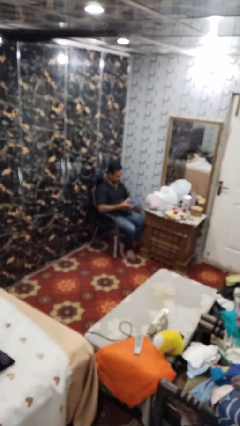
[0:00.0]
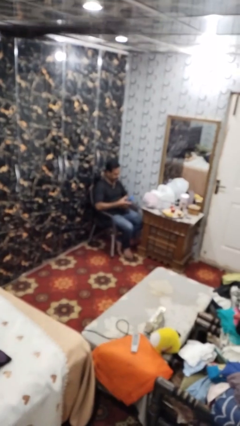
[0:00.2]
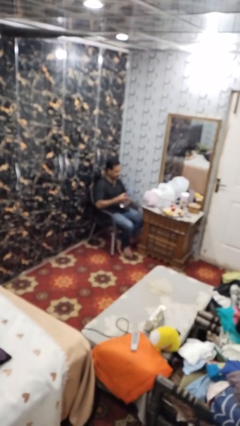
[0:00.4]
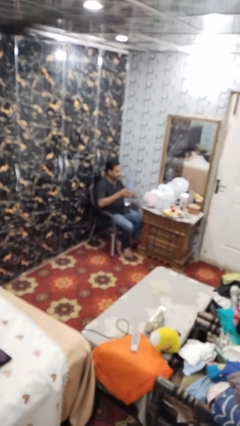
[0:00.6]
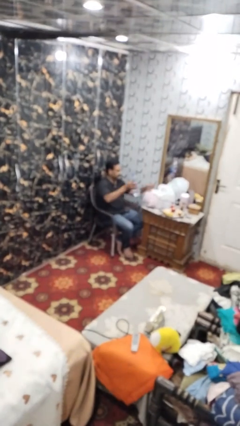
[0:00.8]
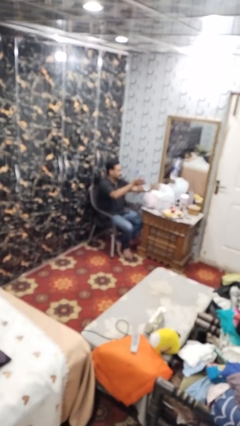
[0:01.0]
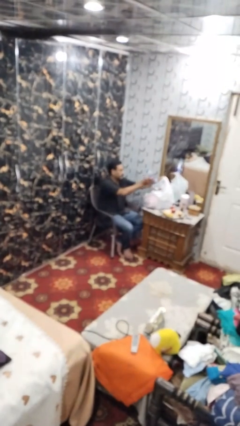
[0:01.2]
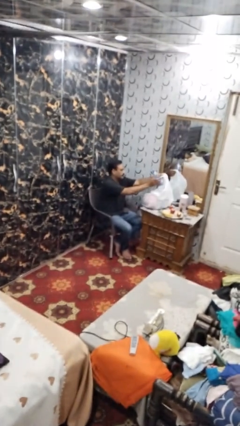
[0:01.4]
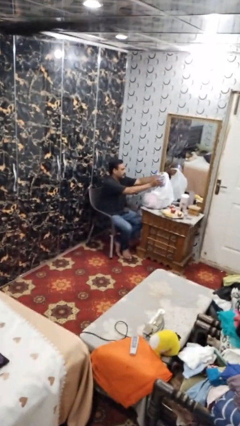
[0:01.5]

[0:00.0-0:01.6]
person puts object into bag

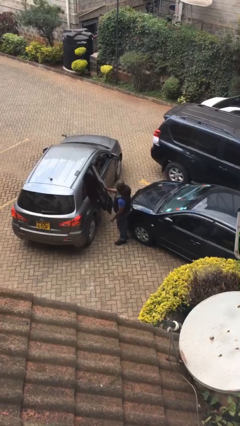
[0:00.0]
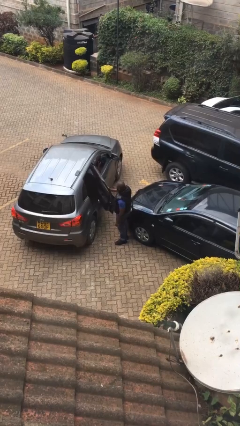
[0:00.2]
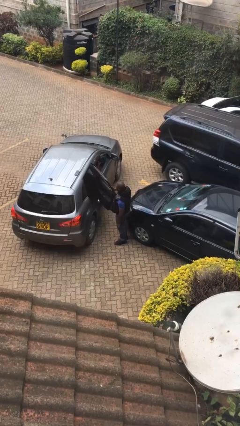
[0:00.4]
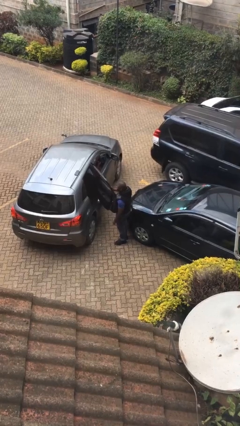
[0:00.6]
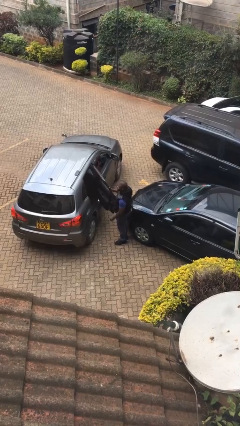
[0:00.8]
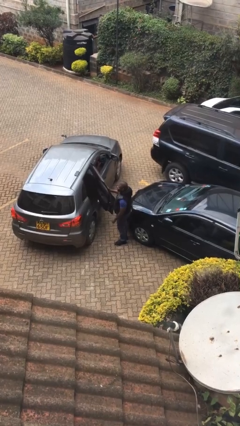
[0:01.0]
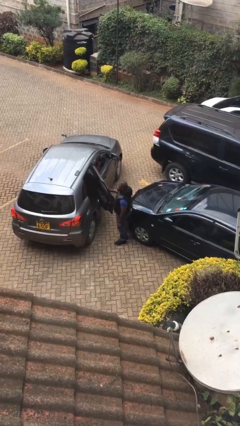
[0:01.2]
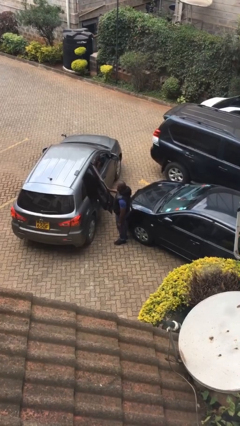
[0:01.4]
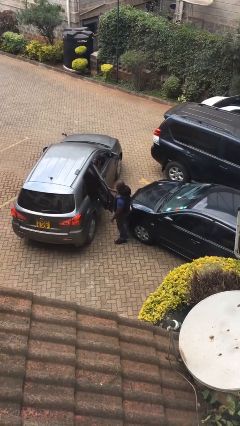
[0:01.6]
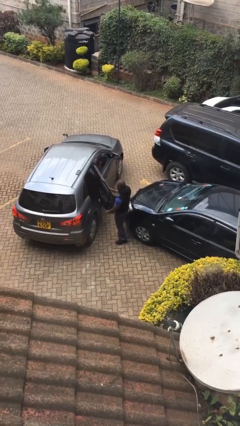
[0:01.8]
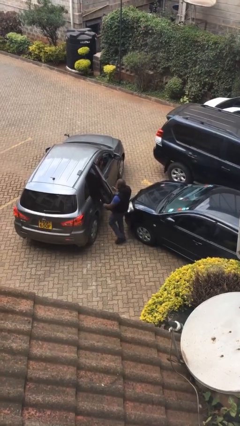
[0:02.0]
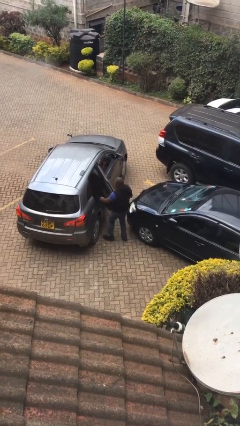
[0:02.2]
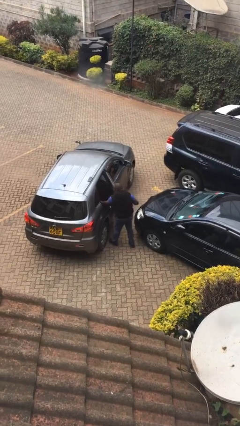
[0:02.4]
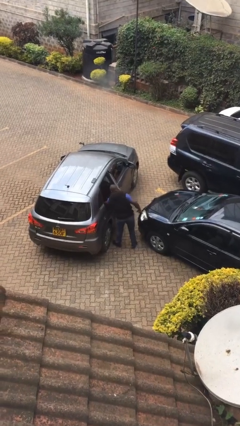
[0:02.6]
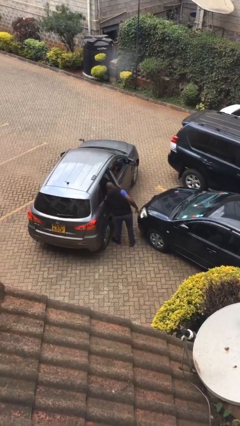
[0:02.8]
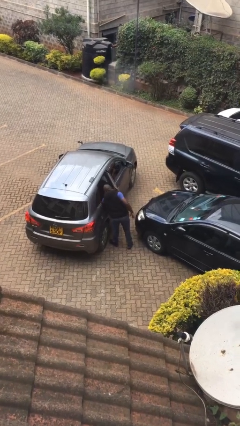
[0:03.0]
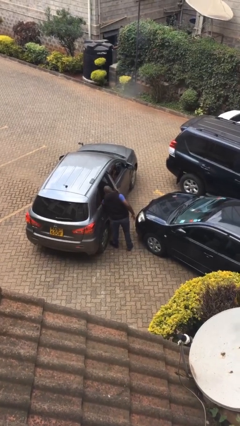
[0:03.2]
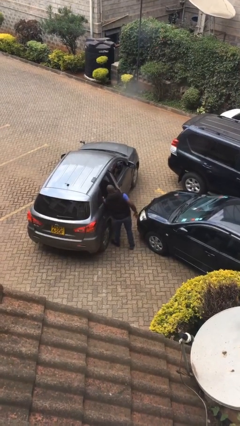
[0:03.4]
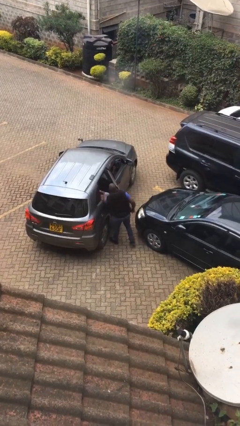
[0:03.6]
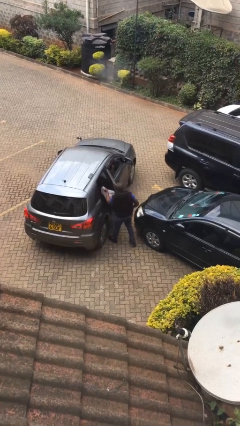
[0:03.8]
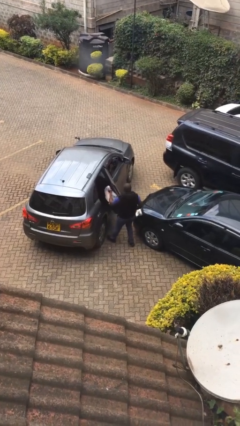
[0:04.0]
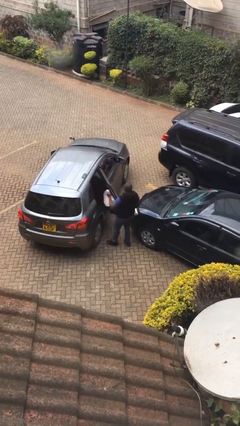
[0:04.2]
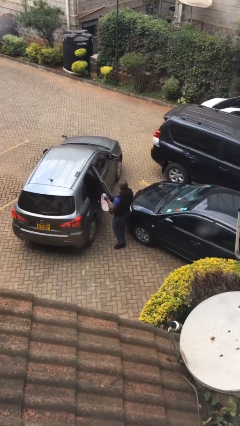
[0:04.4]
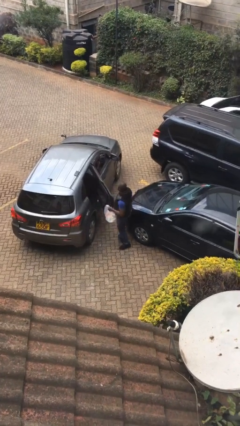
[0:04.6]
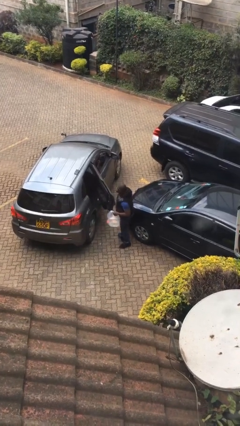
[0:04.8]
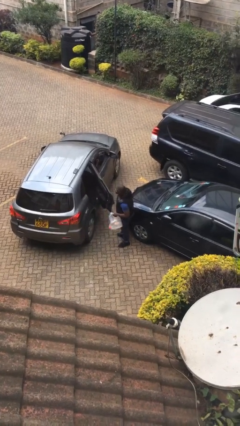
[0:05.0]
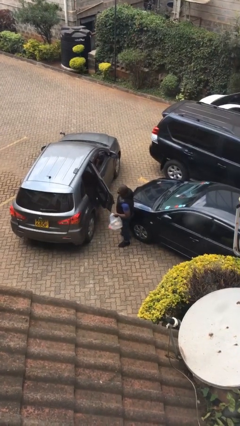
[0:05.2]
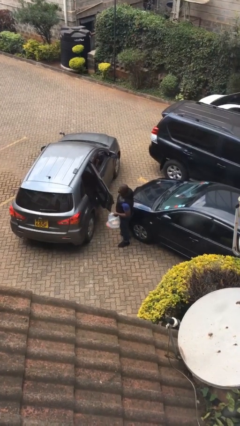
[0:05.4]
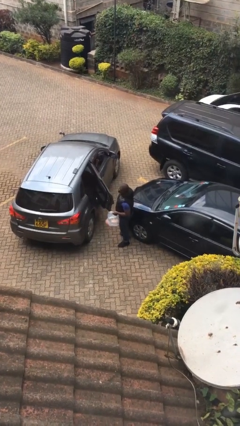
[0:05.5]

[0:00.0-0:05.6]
person unloads car

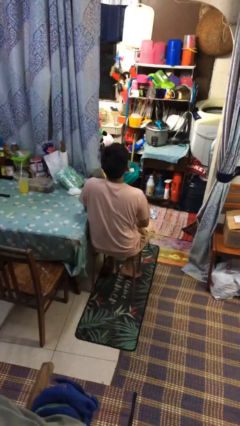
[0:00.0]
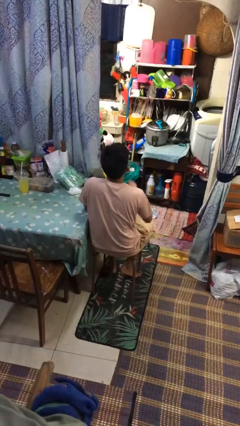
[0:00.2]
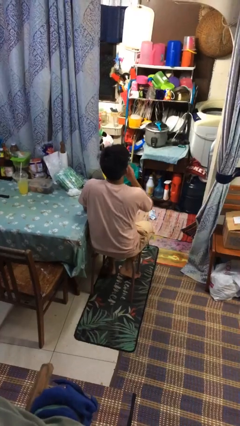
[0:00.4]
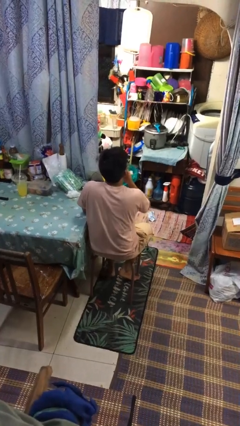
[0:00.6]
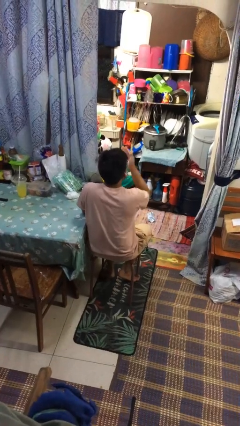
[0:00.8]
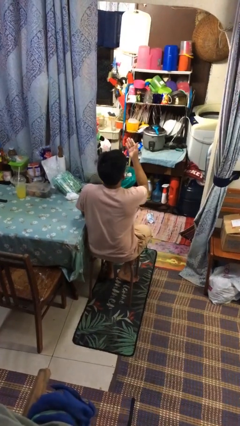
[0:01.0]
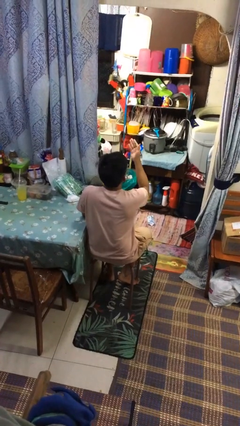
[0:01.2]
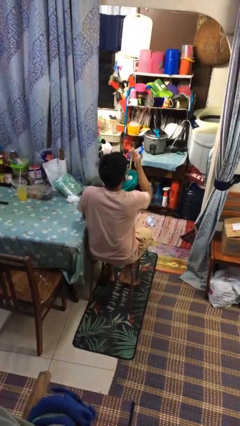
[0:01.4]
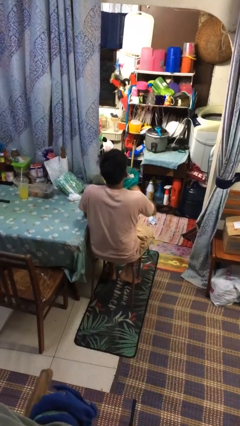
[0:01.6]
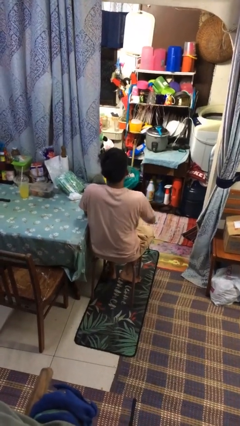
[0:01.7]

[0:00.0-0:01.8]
person gestures blow kiss

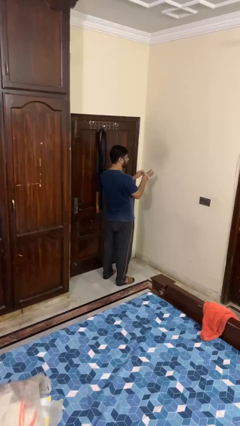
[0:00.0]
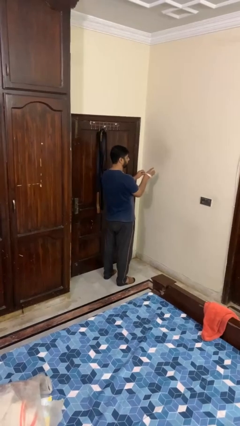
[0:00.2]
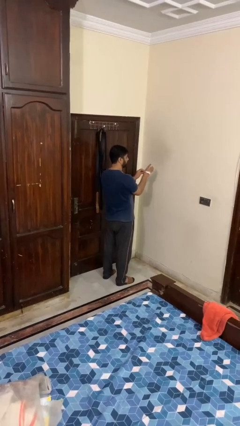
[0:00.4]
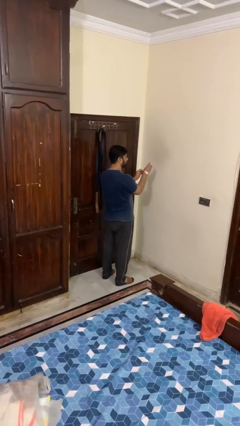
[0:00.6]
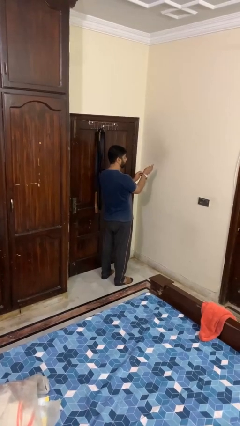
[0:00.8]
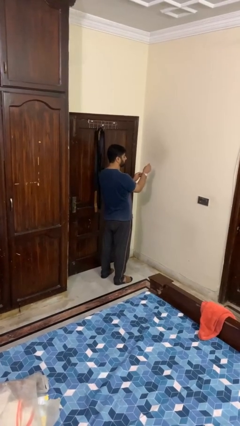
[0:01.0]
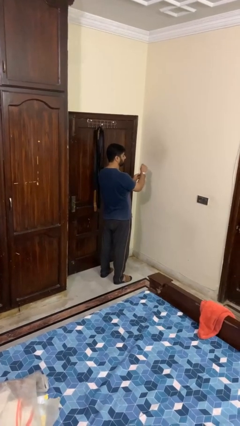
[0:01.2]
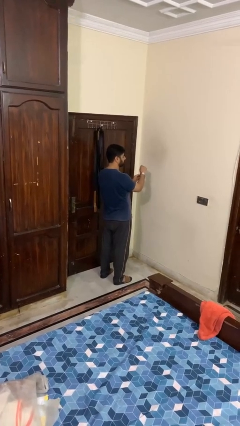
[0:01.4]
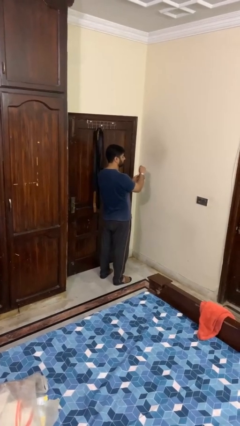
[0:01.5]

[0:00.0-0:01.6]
person puts on wristwatch

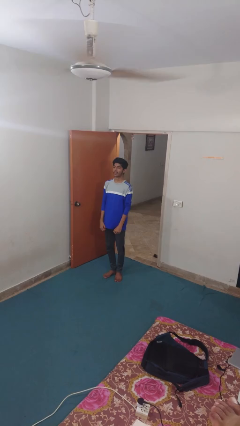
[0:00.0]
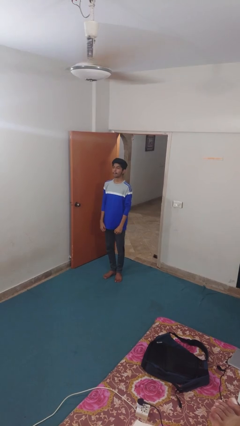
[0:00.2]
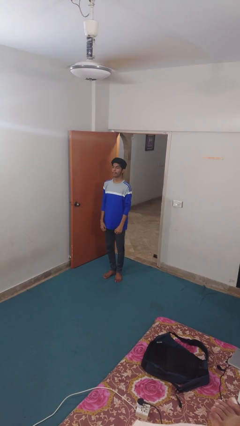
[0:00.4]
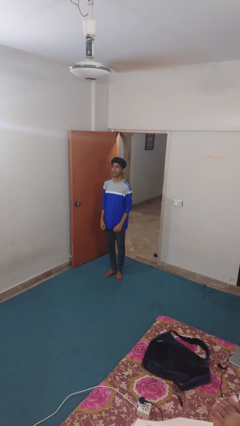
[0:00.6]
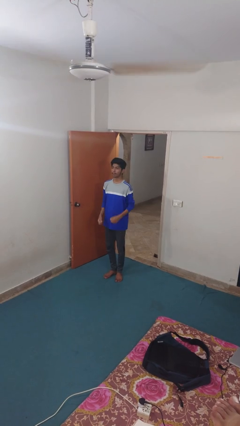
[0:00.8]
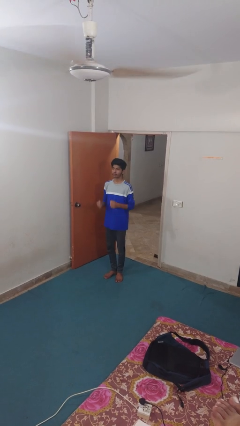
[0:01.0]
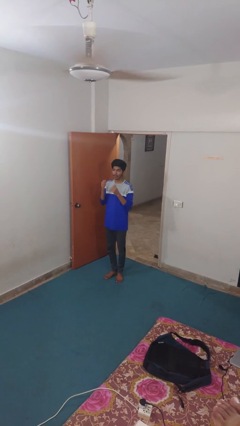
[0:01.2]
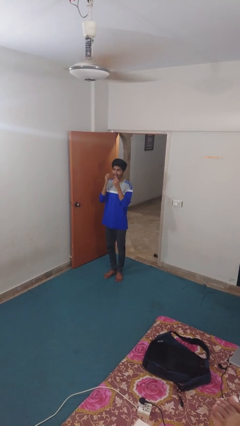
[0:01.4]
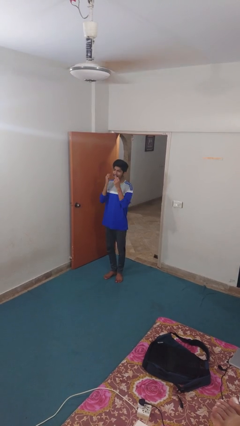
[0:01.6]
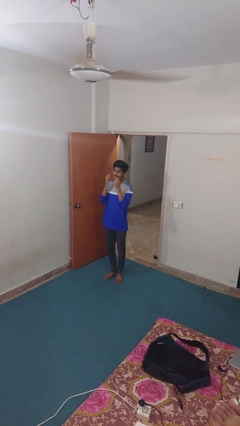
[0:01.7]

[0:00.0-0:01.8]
person flosses

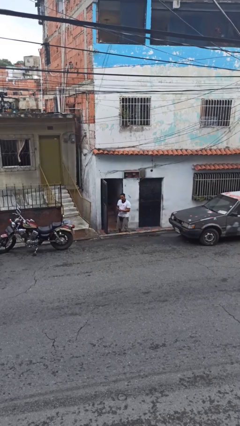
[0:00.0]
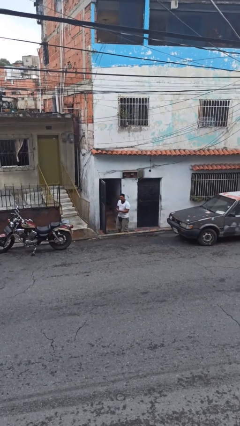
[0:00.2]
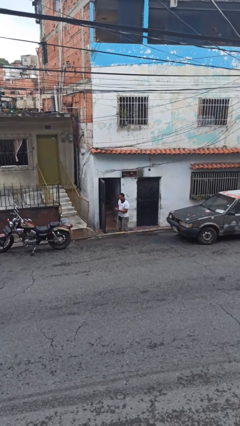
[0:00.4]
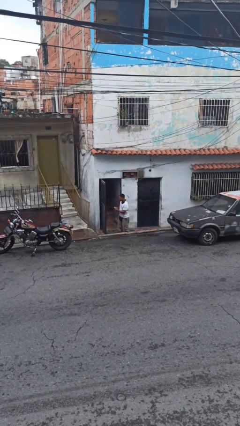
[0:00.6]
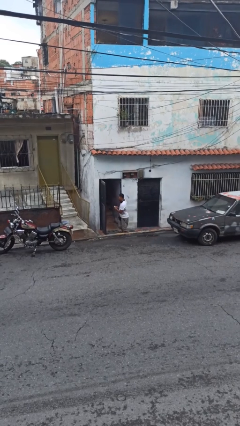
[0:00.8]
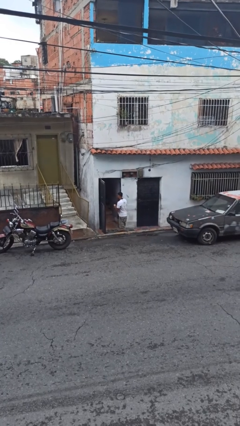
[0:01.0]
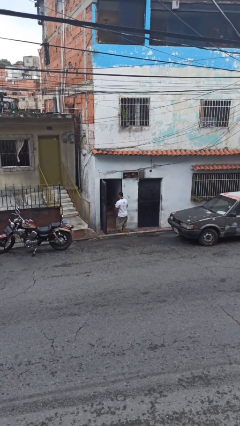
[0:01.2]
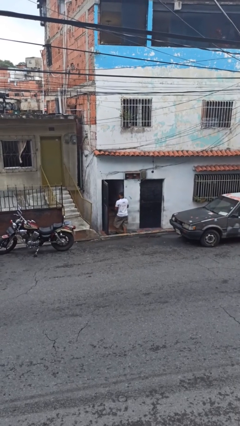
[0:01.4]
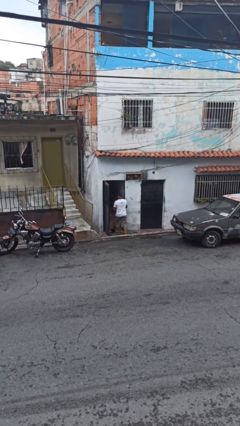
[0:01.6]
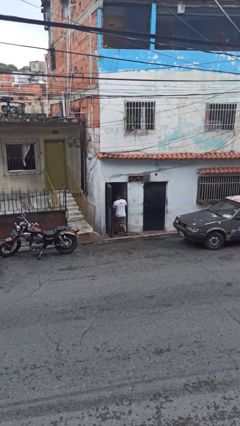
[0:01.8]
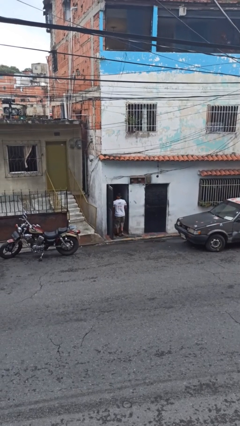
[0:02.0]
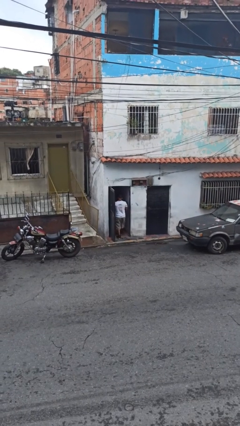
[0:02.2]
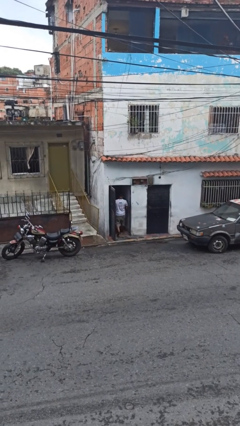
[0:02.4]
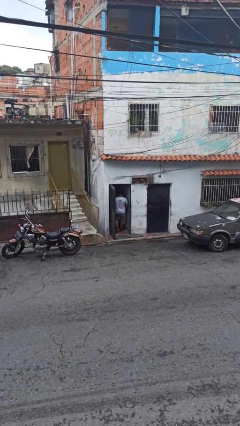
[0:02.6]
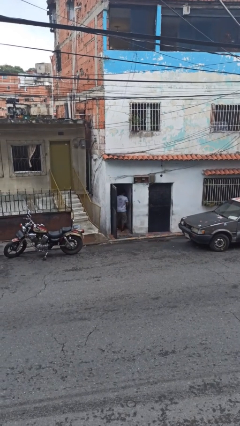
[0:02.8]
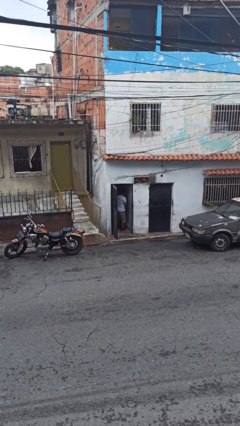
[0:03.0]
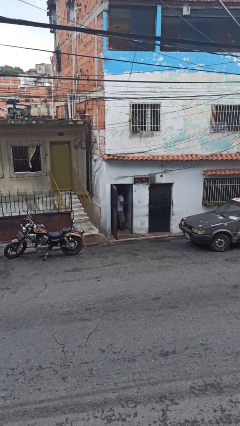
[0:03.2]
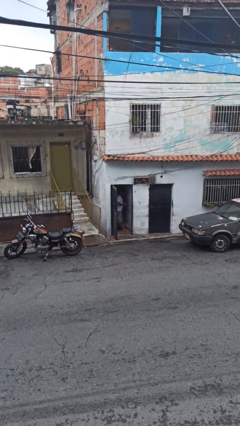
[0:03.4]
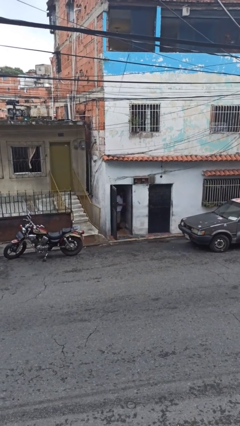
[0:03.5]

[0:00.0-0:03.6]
person exits scene through structure

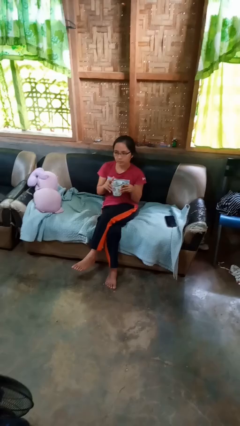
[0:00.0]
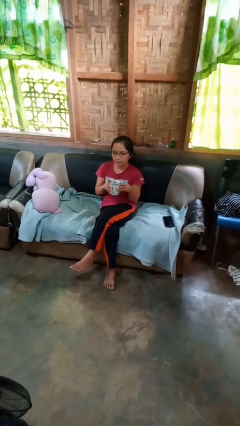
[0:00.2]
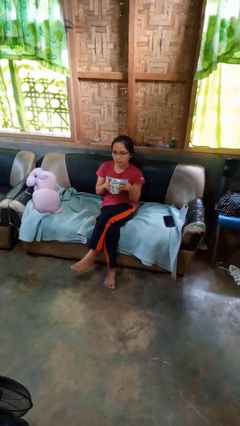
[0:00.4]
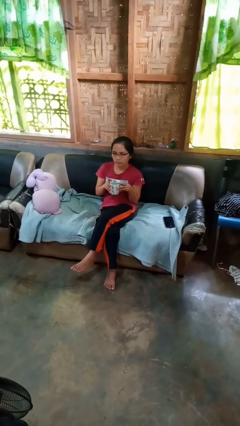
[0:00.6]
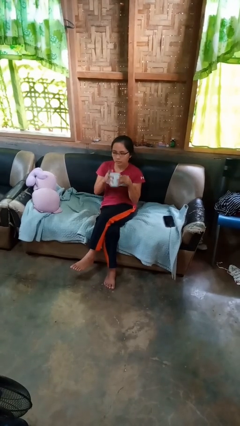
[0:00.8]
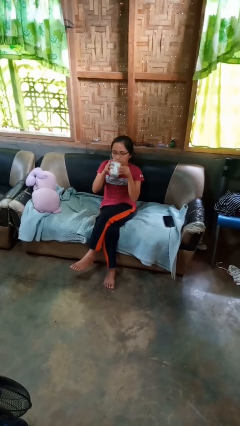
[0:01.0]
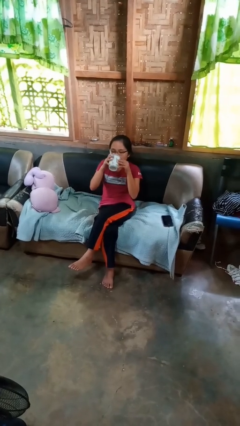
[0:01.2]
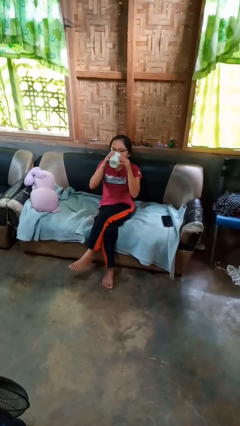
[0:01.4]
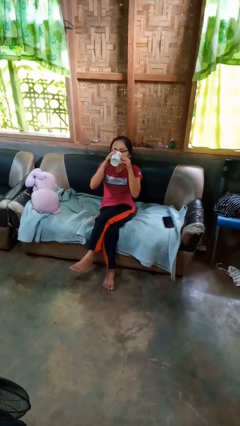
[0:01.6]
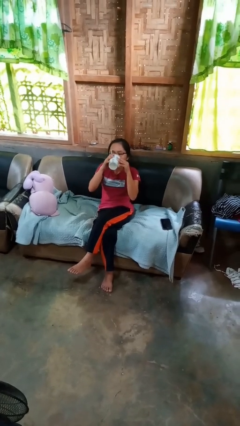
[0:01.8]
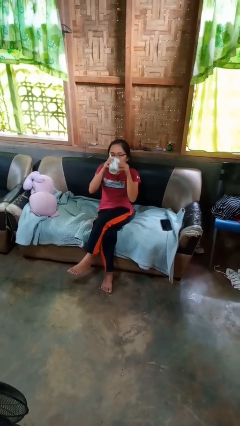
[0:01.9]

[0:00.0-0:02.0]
person drinks from mug
